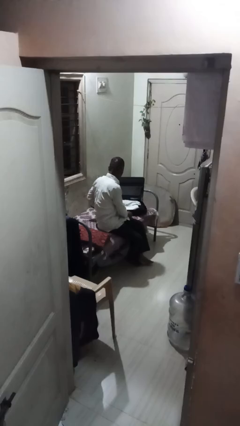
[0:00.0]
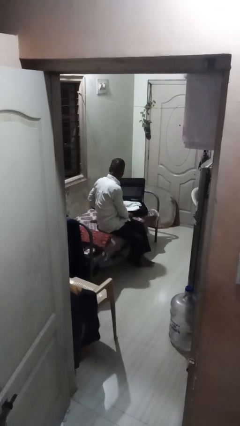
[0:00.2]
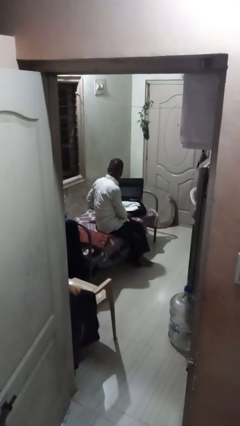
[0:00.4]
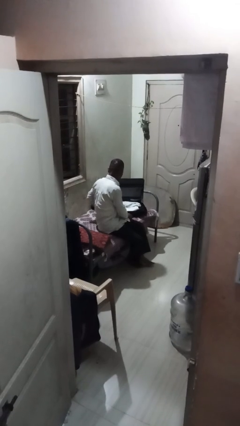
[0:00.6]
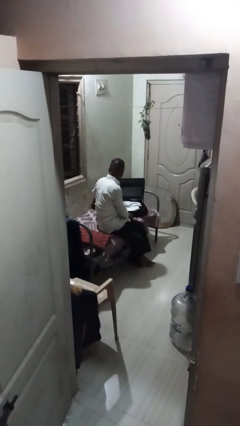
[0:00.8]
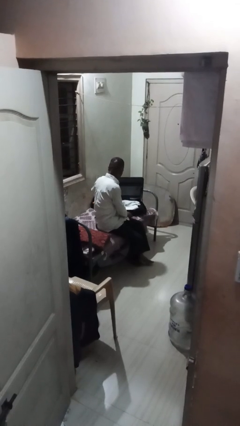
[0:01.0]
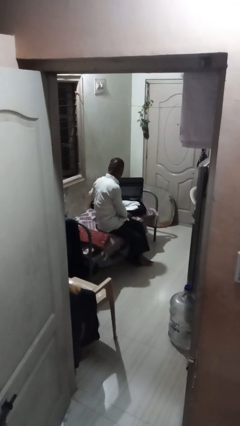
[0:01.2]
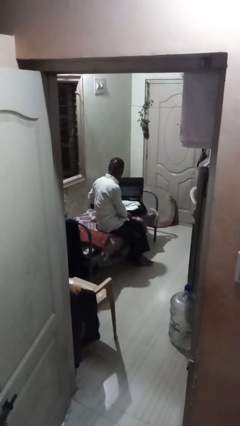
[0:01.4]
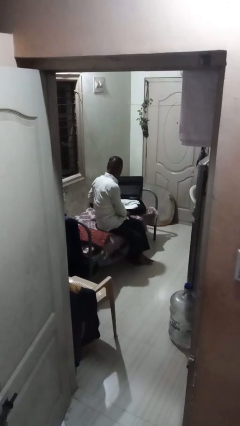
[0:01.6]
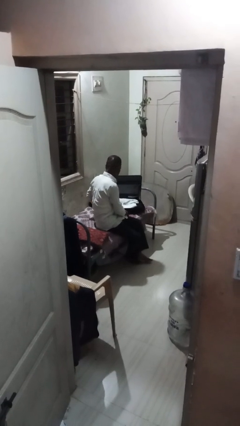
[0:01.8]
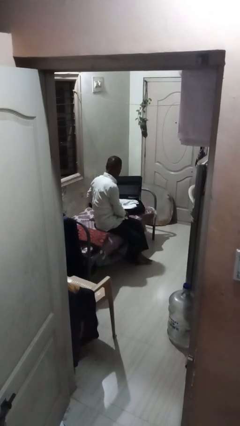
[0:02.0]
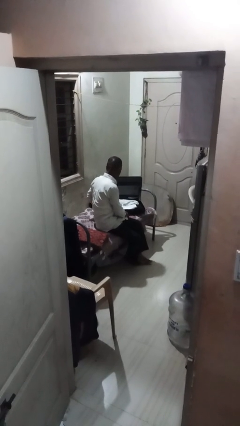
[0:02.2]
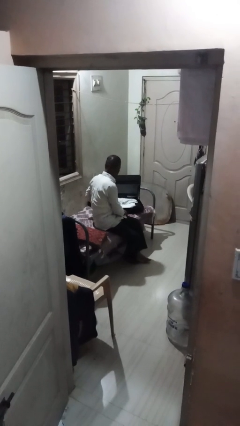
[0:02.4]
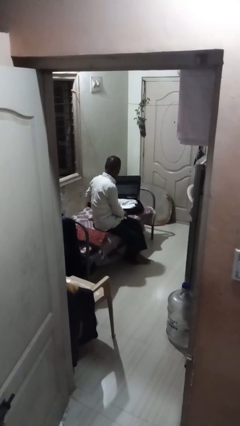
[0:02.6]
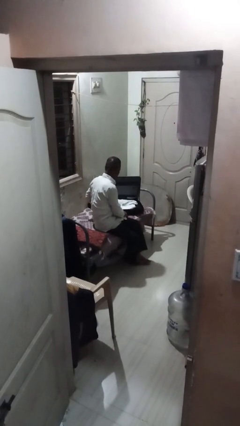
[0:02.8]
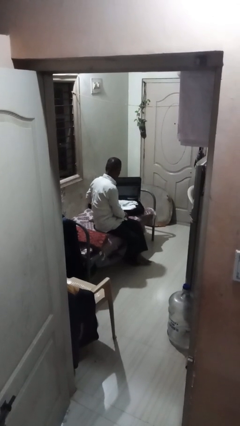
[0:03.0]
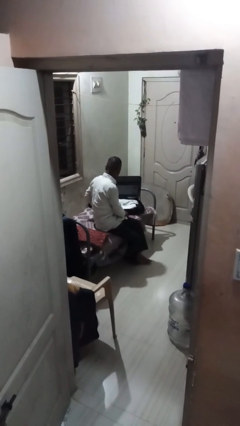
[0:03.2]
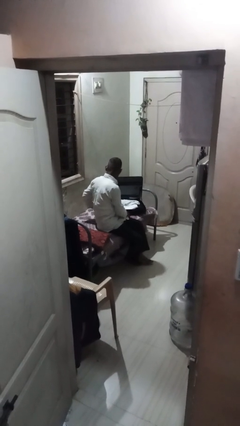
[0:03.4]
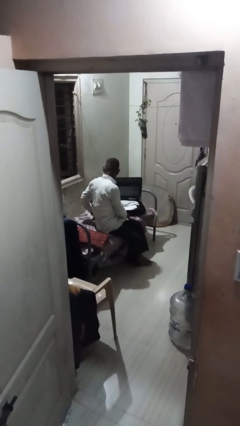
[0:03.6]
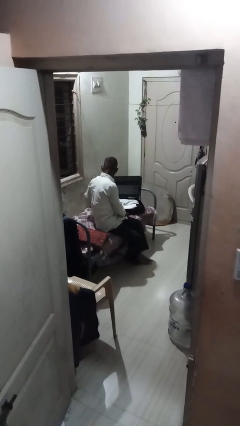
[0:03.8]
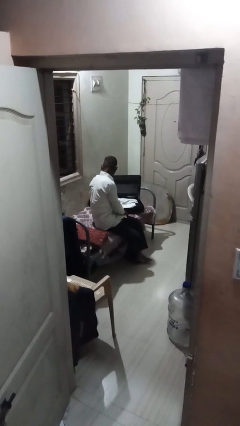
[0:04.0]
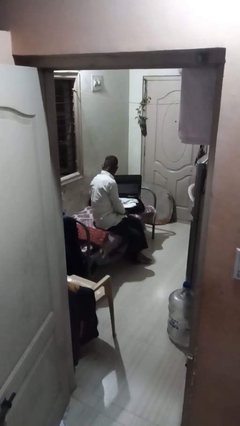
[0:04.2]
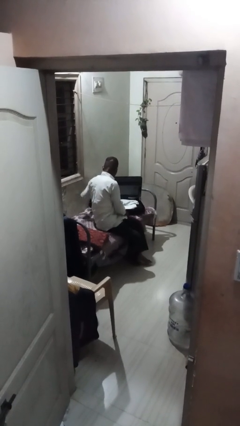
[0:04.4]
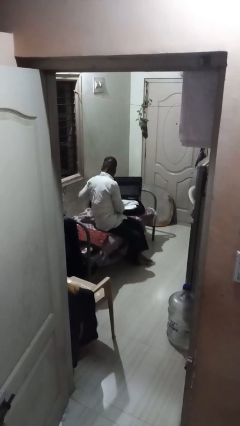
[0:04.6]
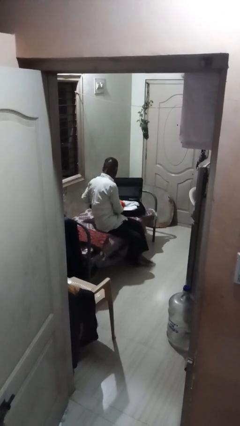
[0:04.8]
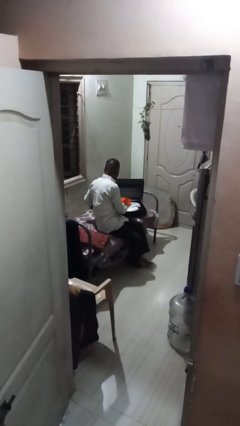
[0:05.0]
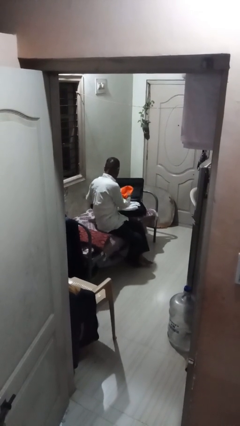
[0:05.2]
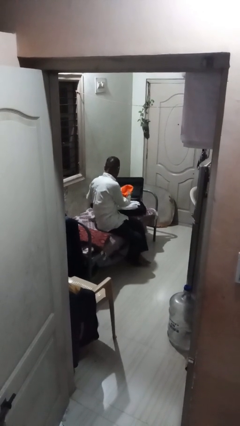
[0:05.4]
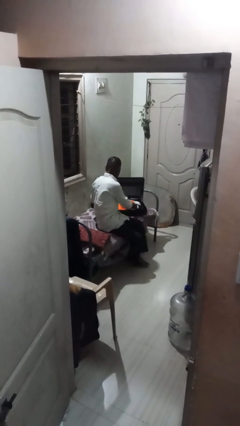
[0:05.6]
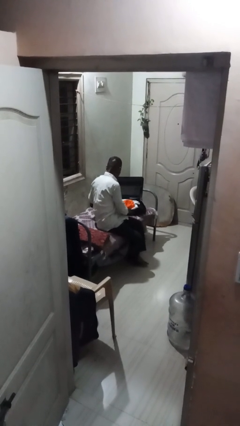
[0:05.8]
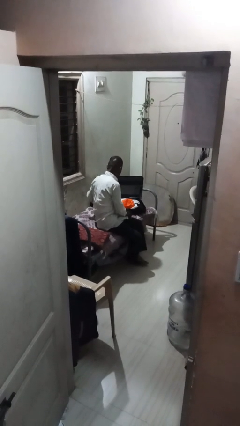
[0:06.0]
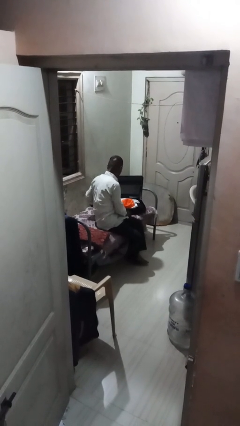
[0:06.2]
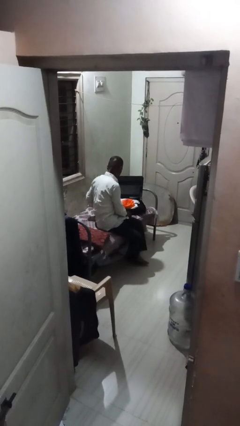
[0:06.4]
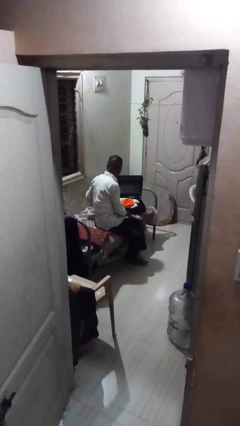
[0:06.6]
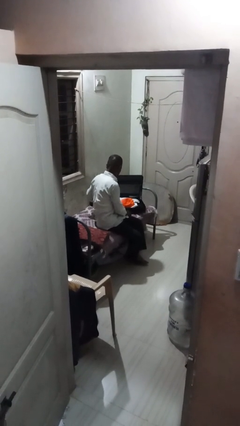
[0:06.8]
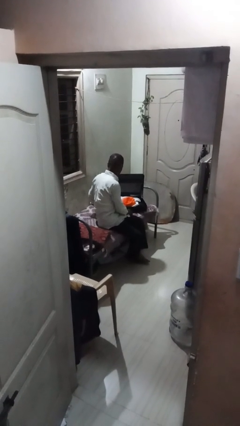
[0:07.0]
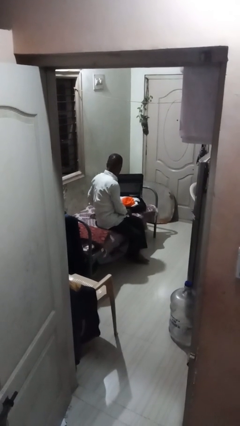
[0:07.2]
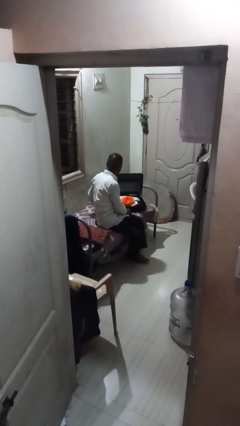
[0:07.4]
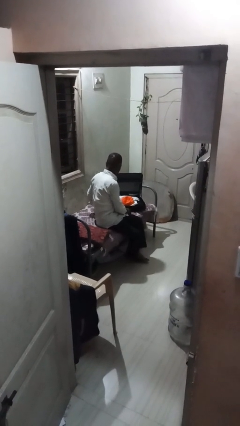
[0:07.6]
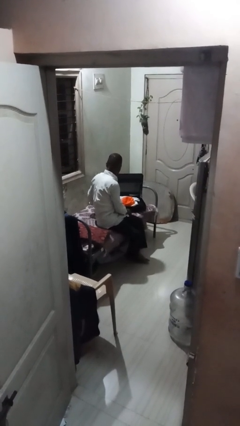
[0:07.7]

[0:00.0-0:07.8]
person loads clothes into suitcase

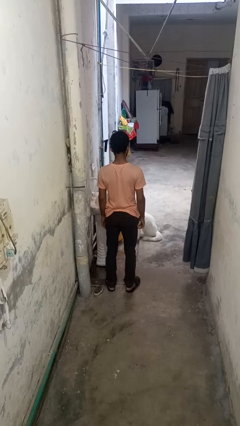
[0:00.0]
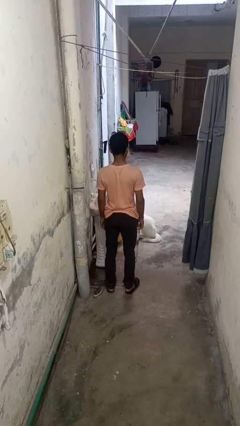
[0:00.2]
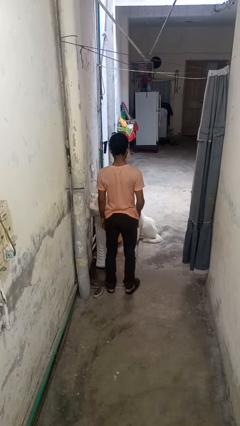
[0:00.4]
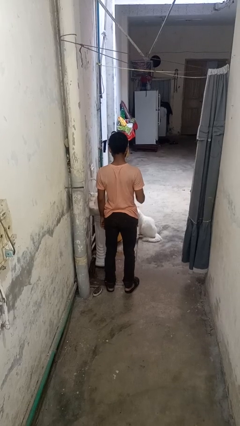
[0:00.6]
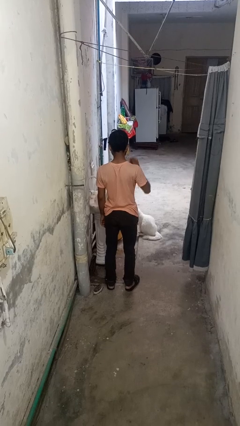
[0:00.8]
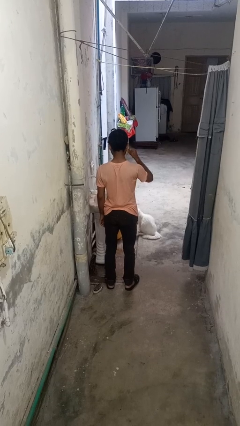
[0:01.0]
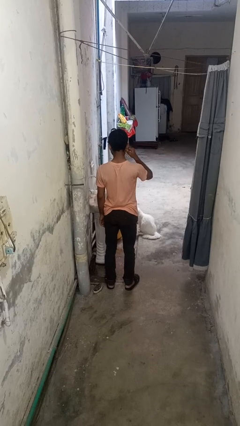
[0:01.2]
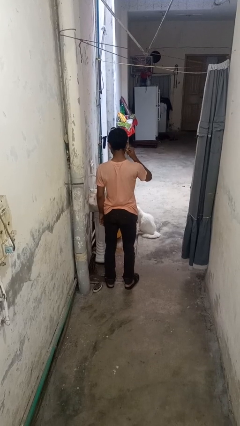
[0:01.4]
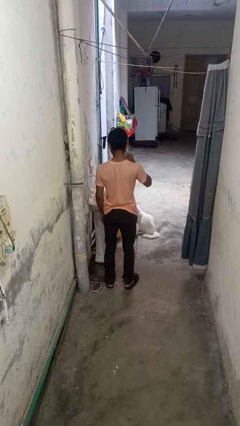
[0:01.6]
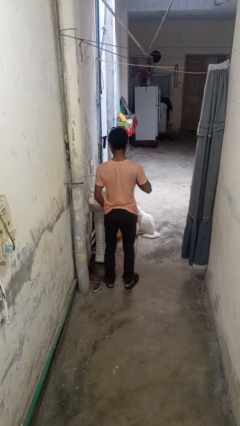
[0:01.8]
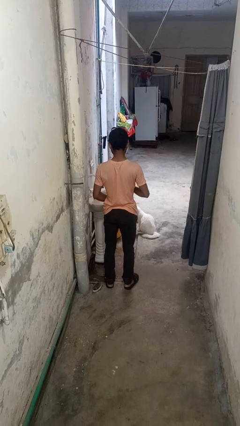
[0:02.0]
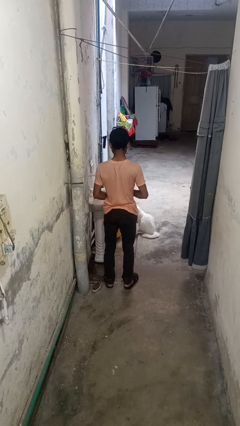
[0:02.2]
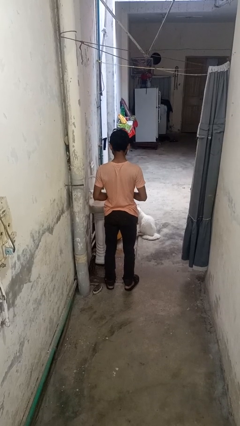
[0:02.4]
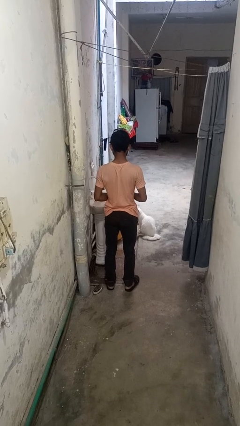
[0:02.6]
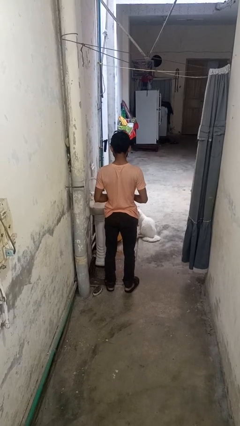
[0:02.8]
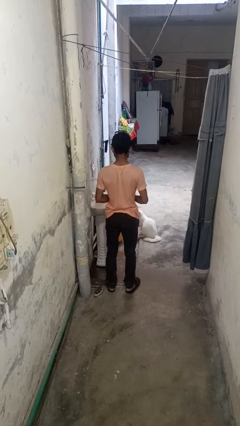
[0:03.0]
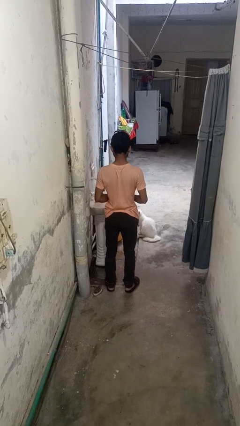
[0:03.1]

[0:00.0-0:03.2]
person takes off earrings

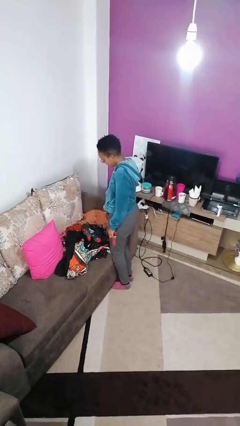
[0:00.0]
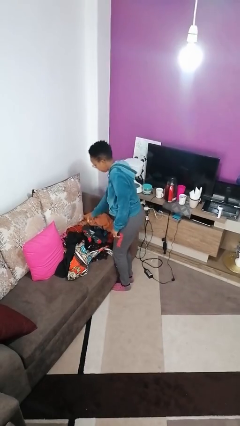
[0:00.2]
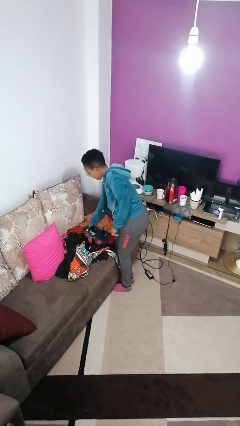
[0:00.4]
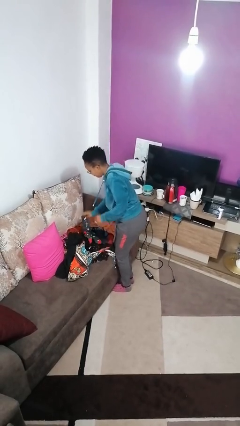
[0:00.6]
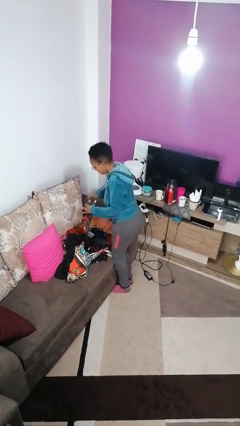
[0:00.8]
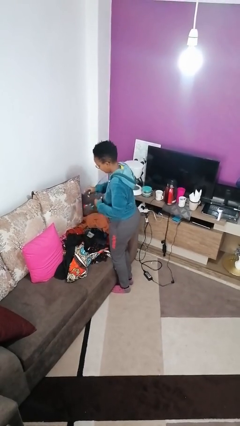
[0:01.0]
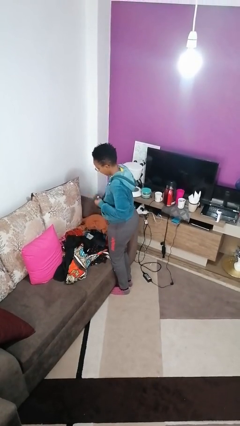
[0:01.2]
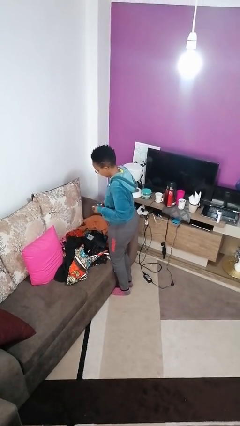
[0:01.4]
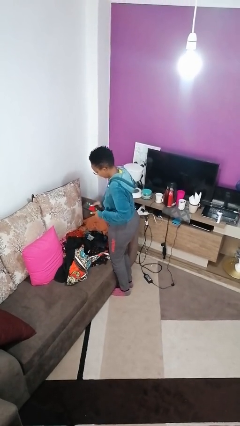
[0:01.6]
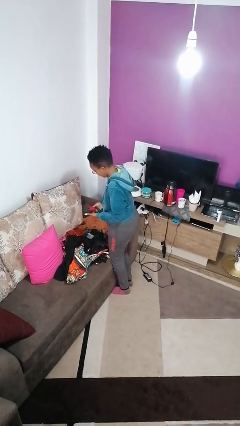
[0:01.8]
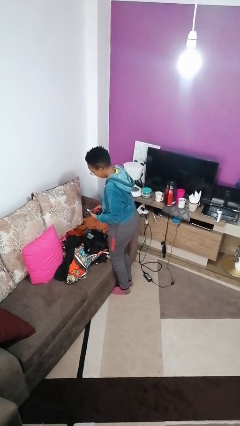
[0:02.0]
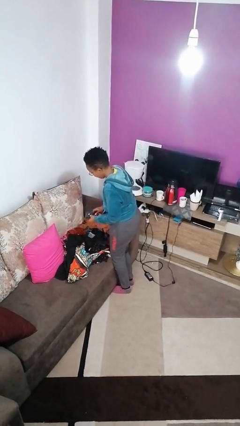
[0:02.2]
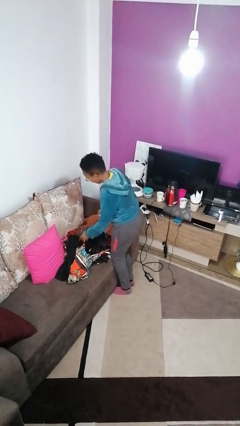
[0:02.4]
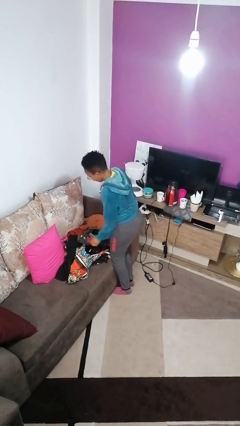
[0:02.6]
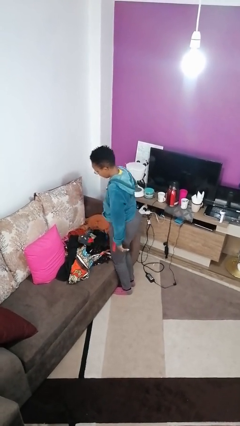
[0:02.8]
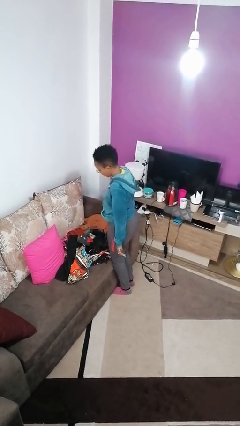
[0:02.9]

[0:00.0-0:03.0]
person folds socks

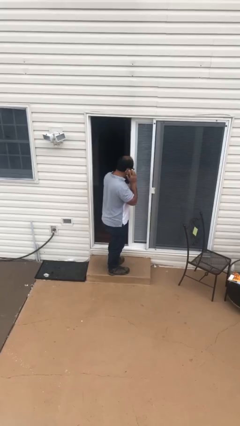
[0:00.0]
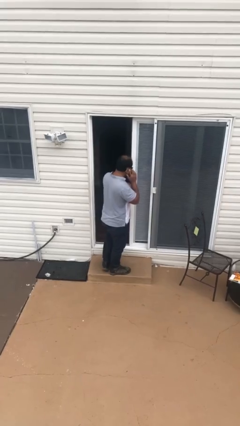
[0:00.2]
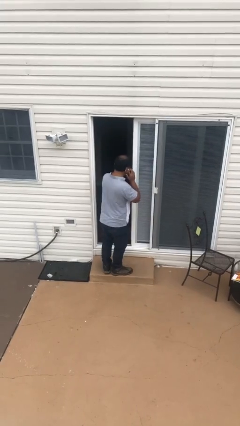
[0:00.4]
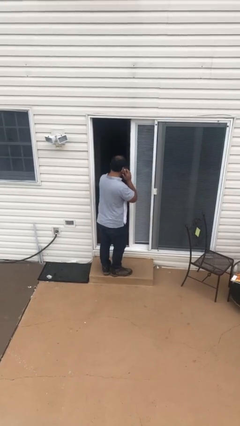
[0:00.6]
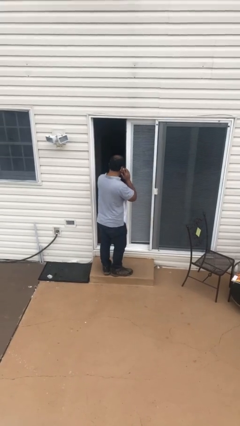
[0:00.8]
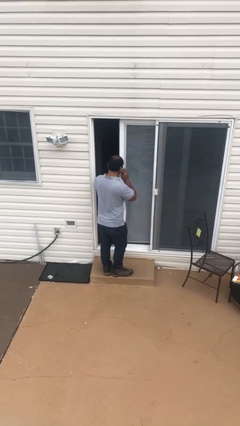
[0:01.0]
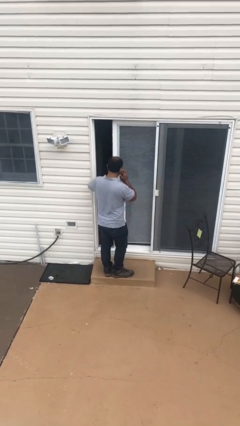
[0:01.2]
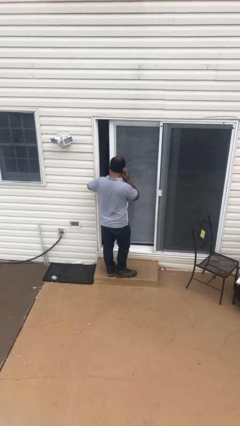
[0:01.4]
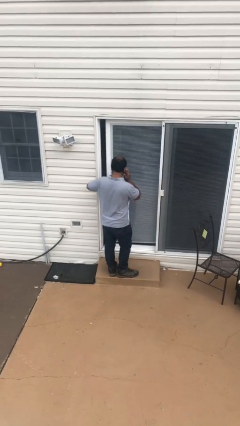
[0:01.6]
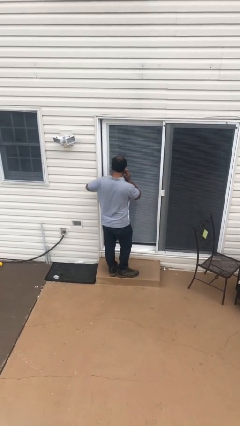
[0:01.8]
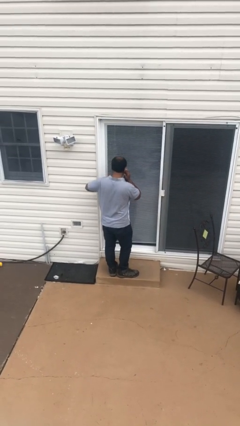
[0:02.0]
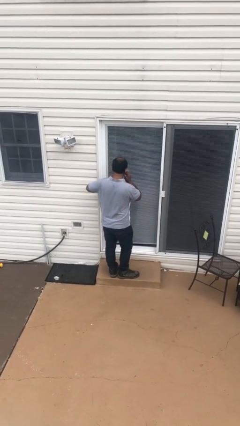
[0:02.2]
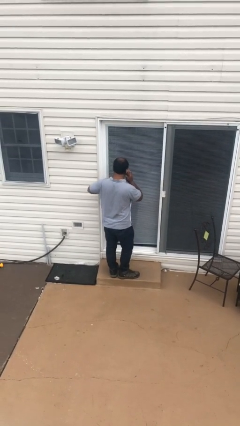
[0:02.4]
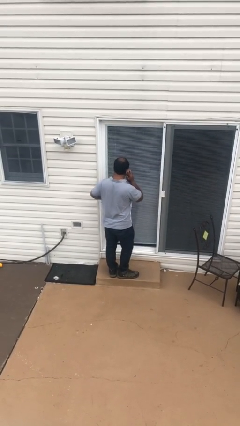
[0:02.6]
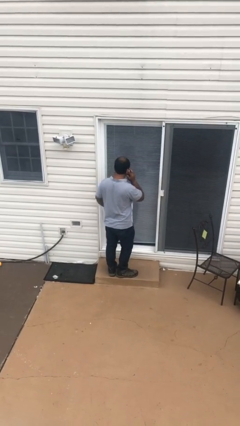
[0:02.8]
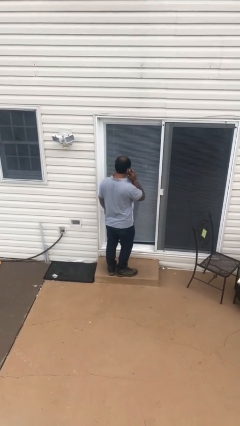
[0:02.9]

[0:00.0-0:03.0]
person closes facility door

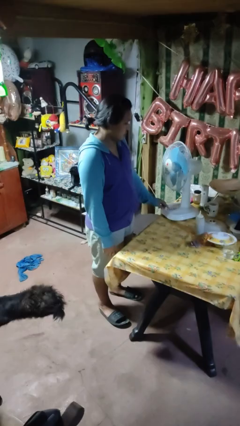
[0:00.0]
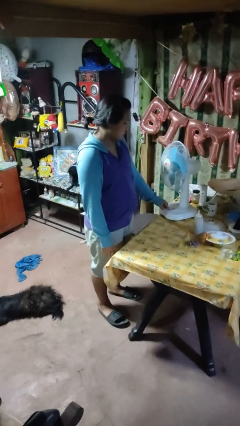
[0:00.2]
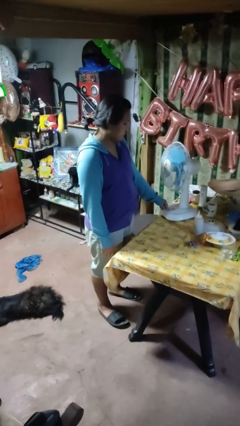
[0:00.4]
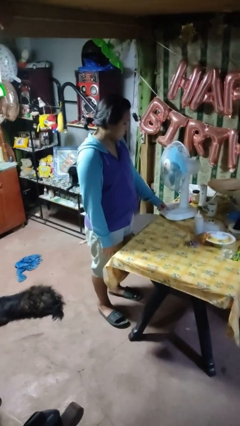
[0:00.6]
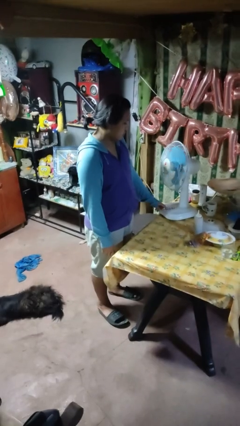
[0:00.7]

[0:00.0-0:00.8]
person turns on fan
